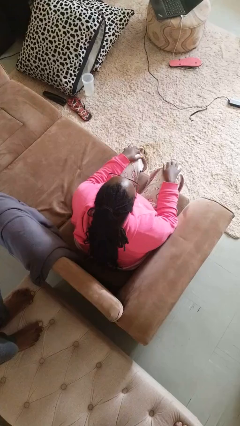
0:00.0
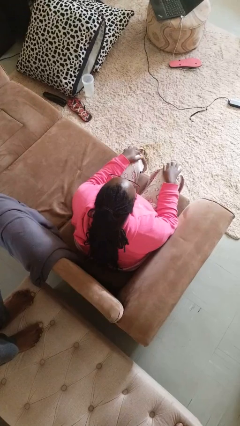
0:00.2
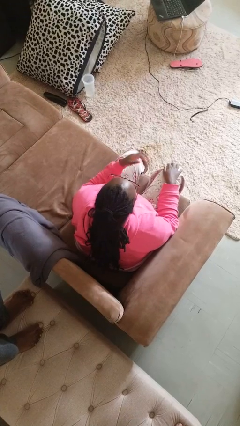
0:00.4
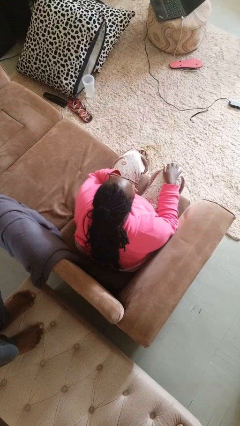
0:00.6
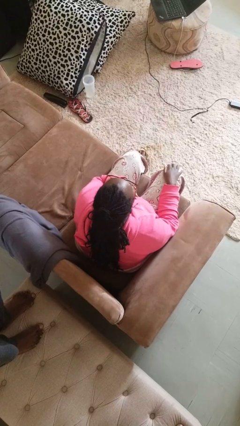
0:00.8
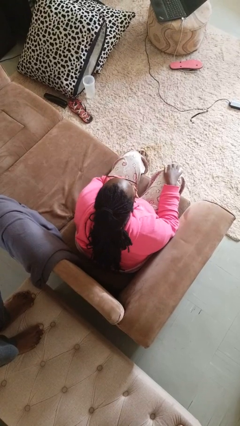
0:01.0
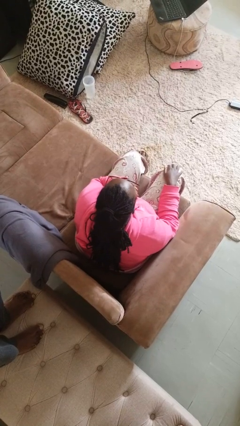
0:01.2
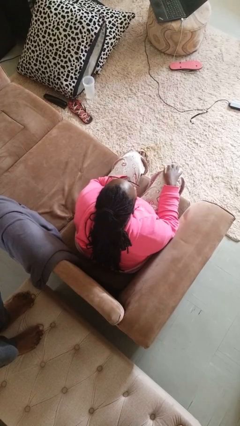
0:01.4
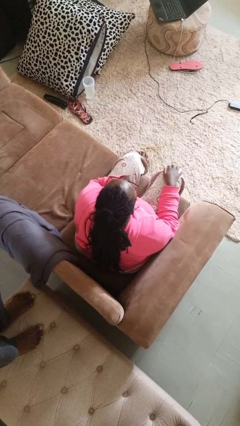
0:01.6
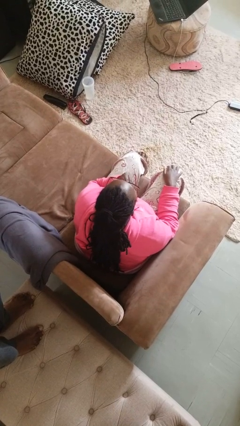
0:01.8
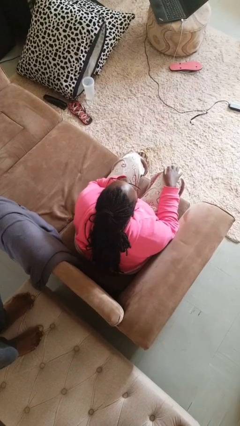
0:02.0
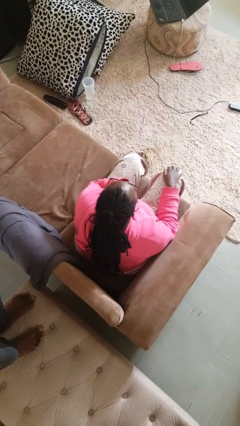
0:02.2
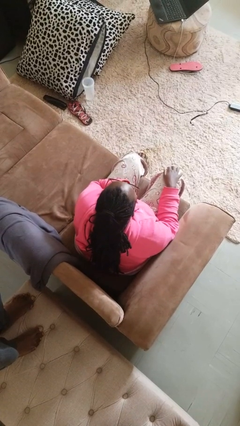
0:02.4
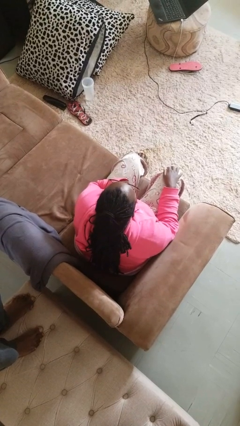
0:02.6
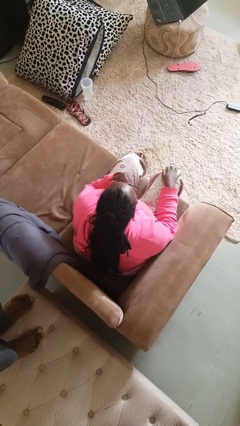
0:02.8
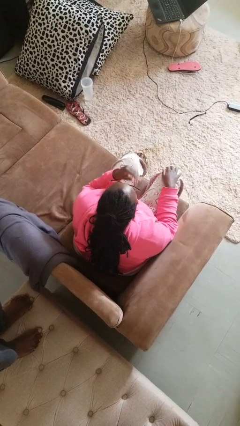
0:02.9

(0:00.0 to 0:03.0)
person strokes chin

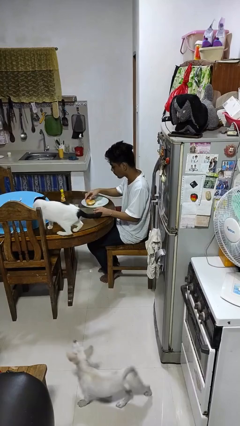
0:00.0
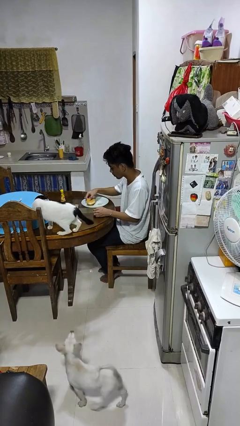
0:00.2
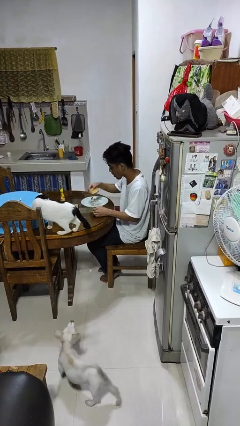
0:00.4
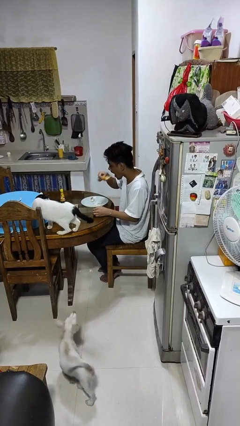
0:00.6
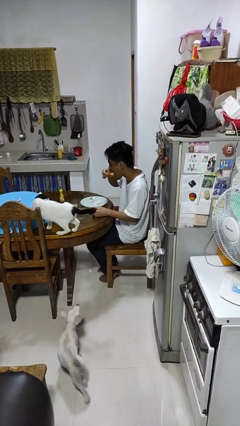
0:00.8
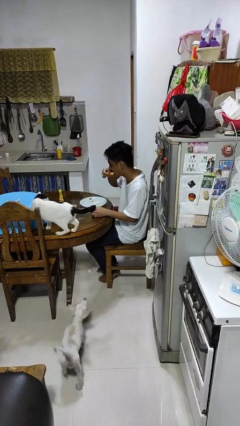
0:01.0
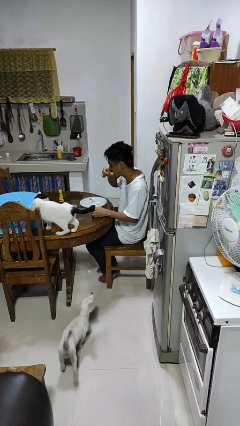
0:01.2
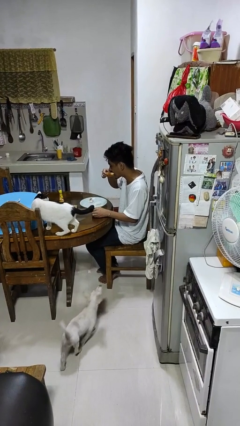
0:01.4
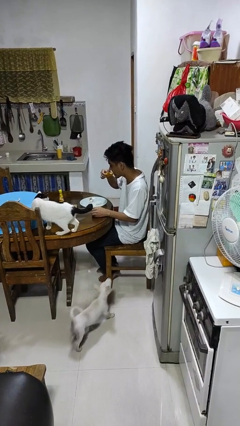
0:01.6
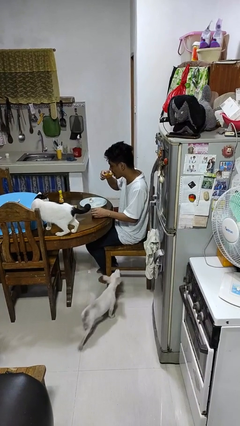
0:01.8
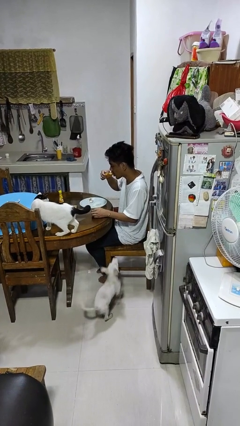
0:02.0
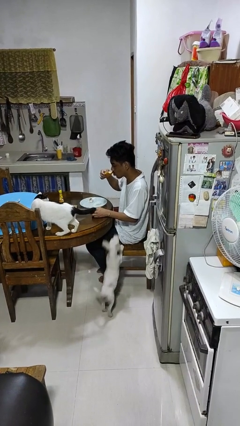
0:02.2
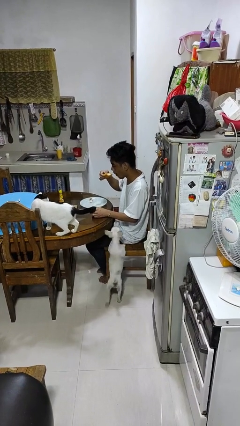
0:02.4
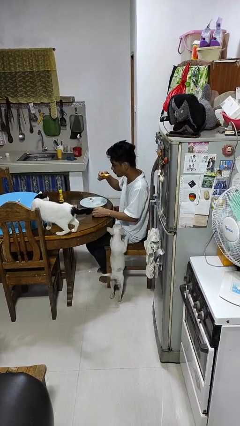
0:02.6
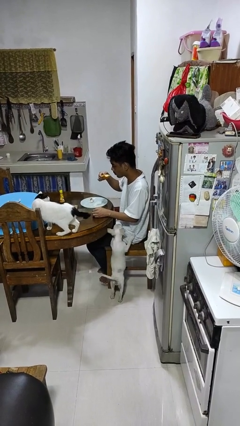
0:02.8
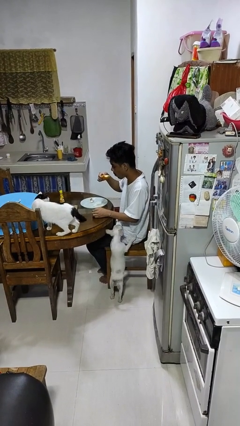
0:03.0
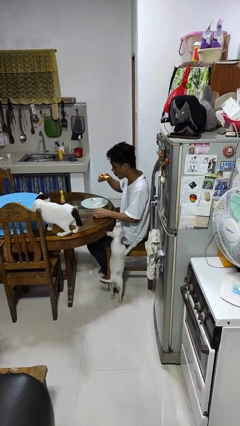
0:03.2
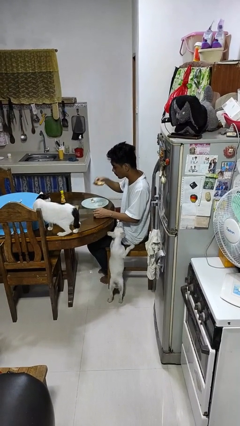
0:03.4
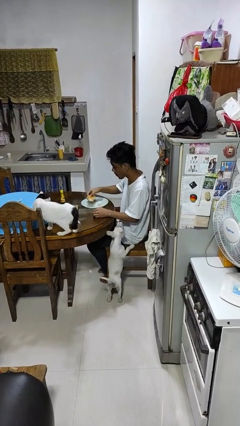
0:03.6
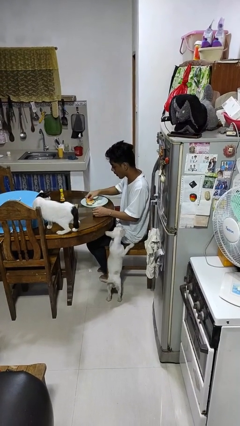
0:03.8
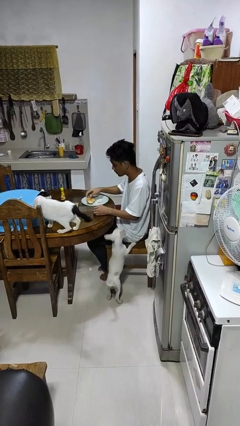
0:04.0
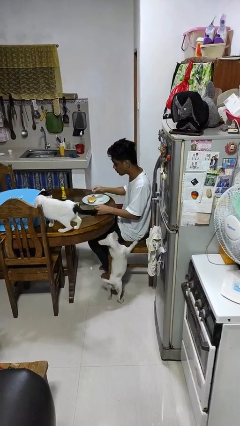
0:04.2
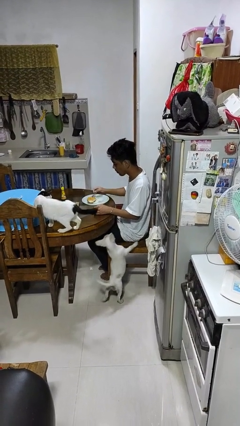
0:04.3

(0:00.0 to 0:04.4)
person eats with hands

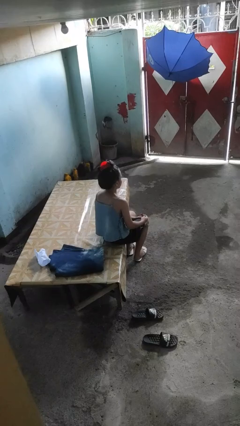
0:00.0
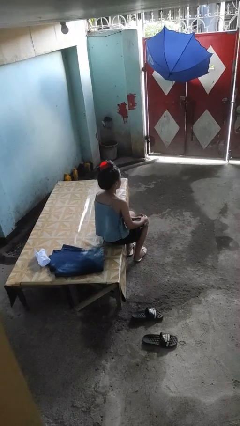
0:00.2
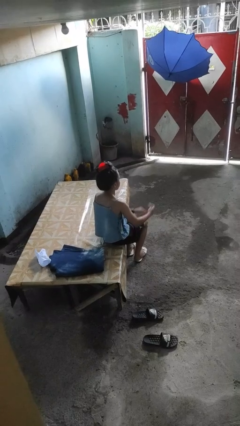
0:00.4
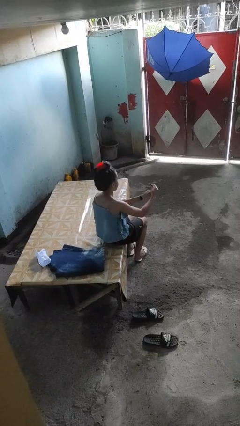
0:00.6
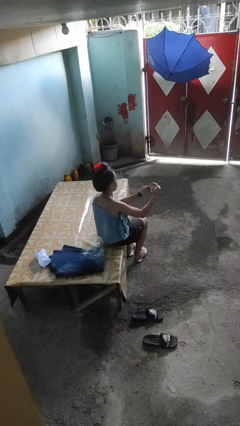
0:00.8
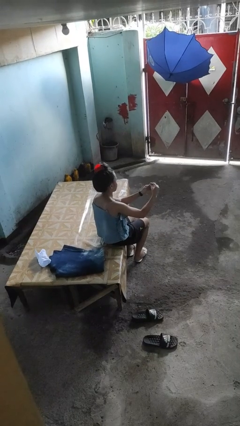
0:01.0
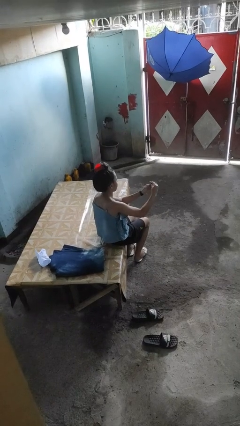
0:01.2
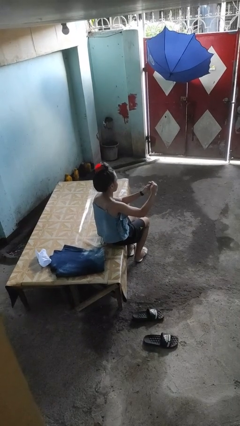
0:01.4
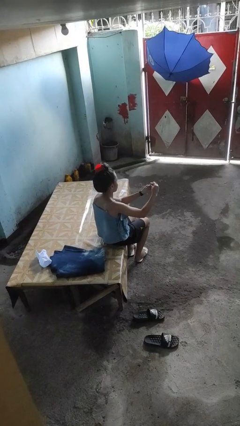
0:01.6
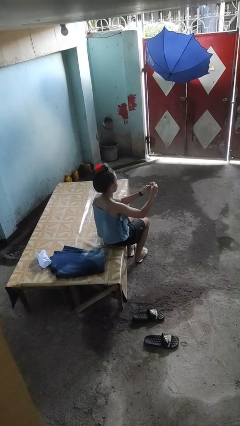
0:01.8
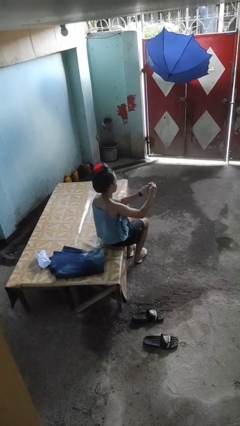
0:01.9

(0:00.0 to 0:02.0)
person clips fingernails

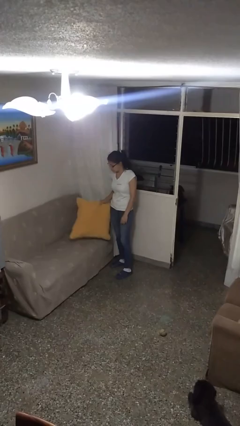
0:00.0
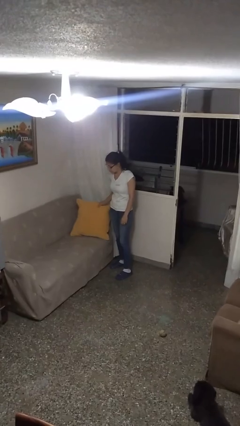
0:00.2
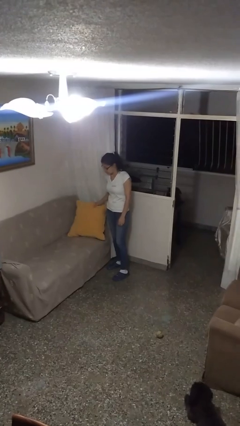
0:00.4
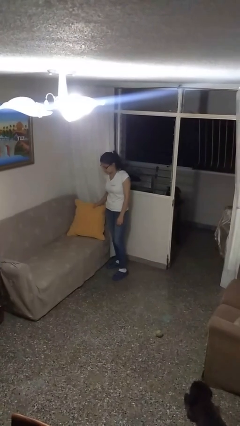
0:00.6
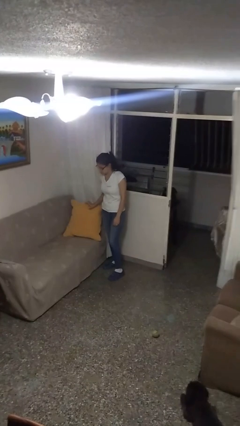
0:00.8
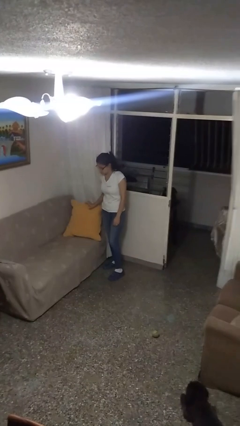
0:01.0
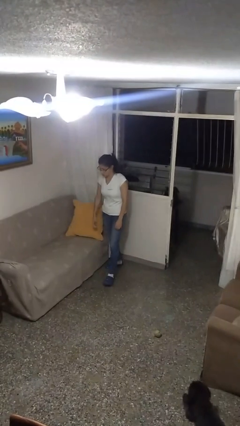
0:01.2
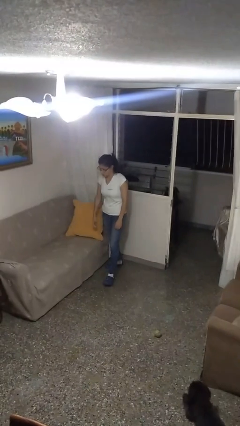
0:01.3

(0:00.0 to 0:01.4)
person puts down object on couch

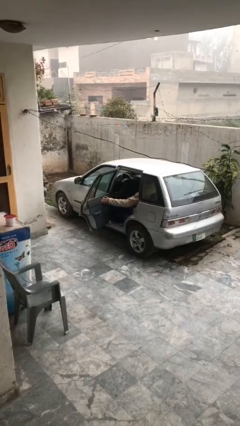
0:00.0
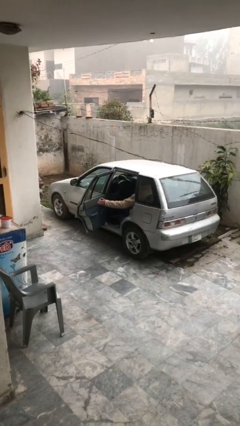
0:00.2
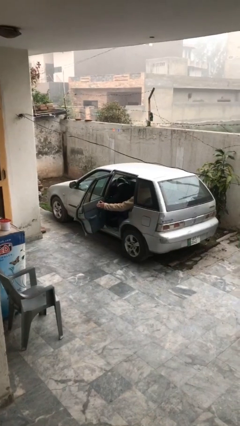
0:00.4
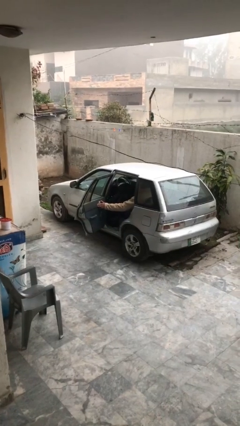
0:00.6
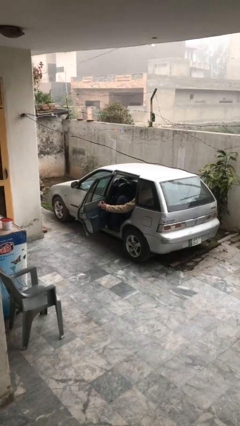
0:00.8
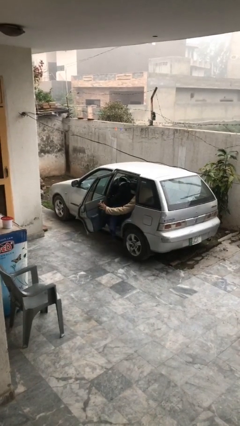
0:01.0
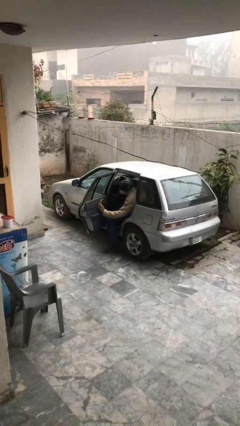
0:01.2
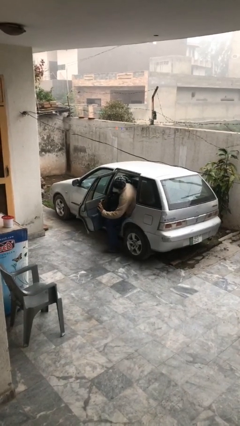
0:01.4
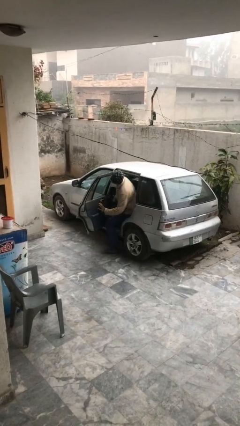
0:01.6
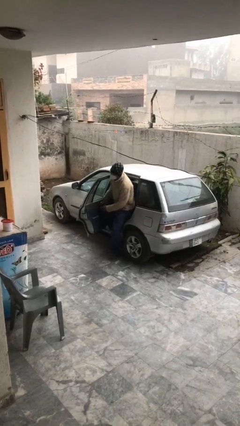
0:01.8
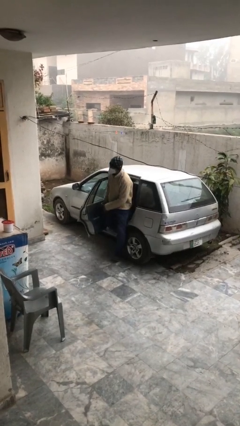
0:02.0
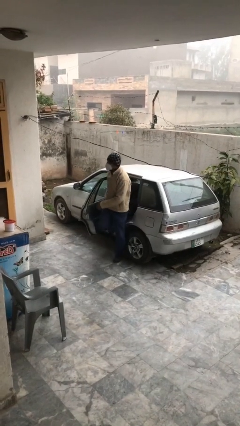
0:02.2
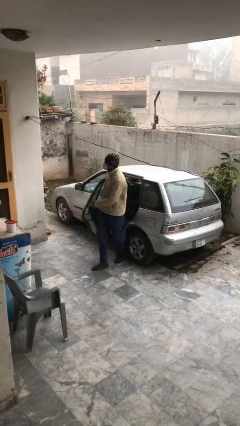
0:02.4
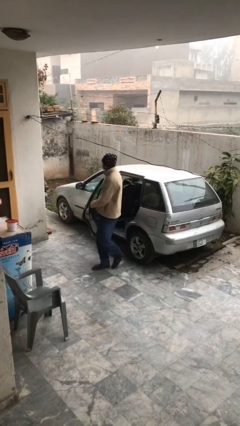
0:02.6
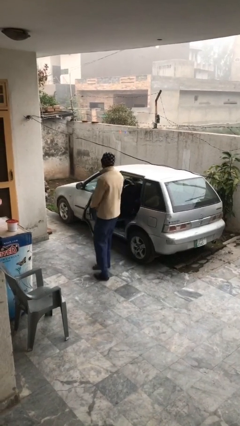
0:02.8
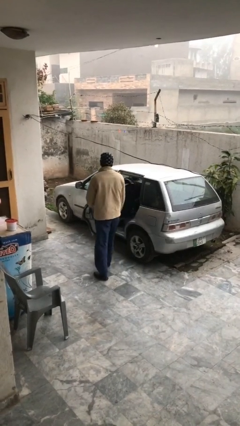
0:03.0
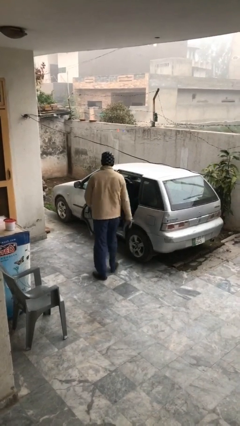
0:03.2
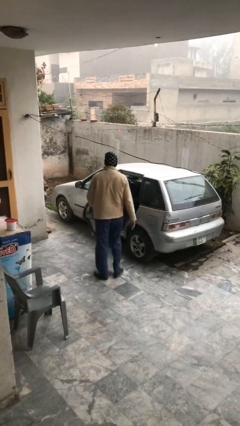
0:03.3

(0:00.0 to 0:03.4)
person exits car

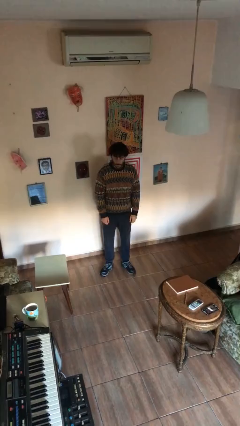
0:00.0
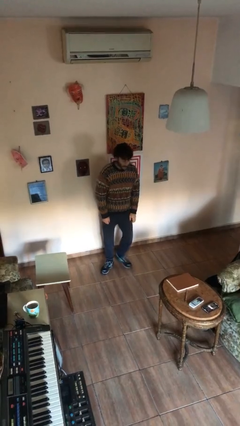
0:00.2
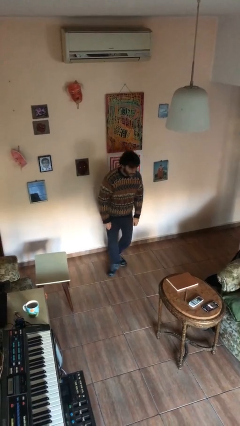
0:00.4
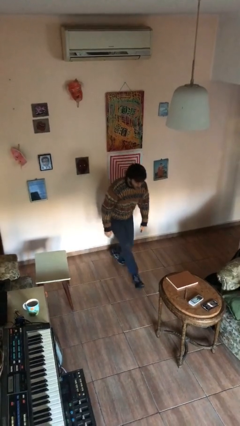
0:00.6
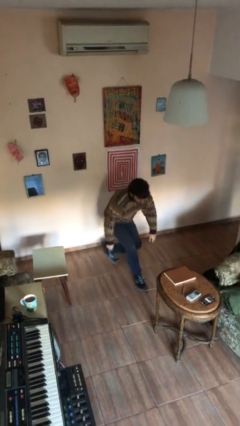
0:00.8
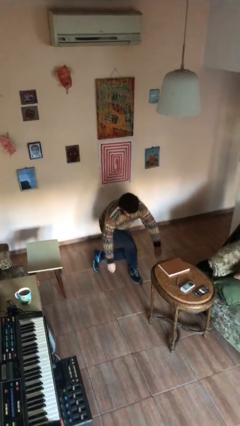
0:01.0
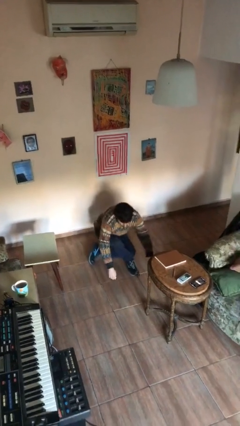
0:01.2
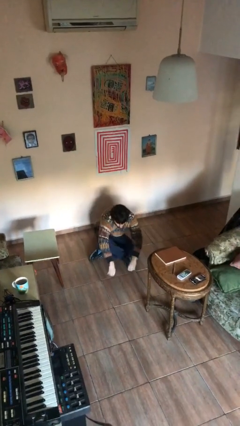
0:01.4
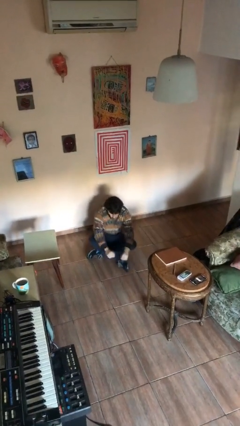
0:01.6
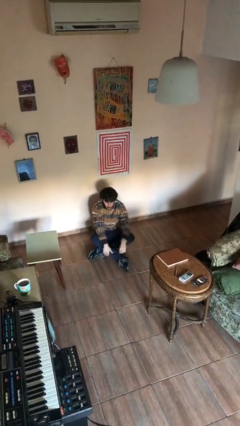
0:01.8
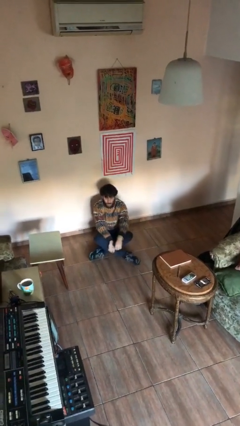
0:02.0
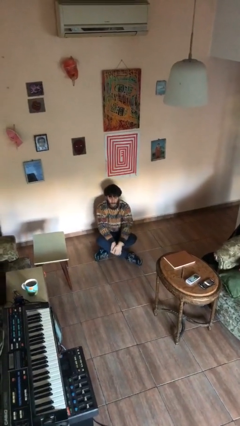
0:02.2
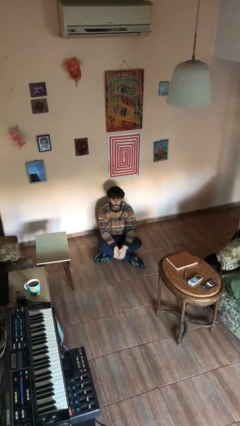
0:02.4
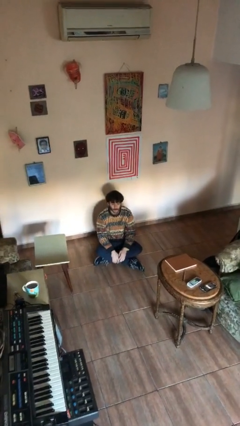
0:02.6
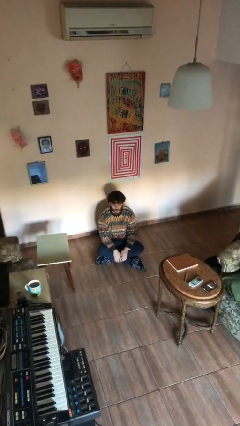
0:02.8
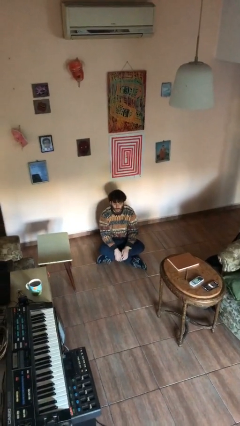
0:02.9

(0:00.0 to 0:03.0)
person sits crisscross

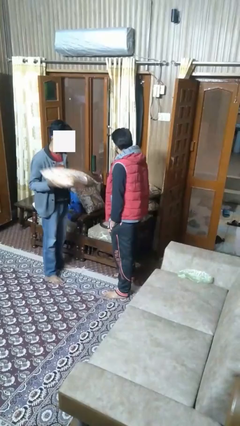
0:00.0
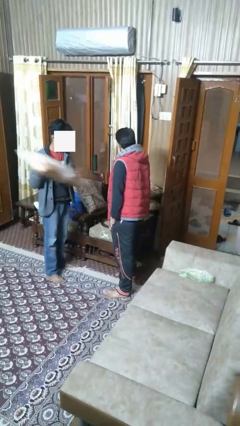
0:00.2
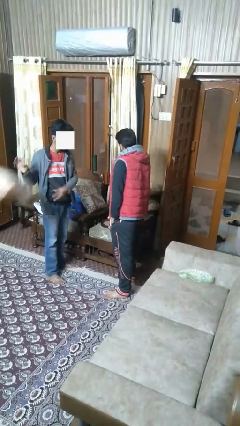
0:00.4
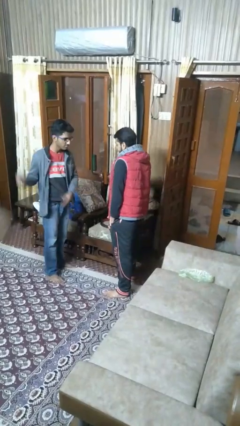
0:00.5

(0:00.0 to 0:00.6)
person transfers object to person
